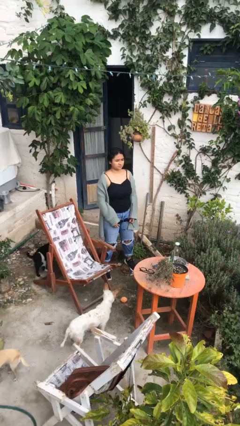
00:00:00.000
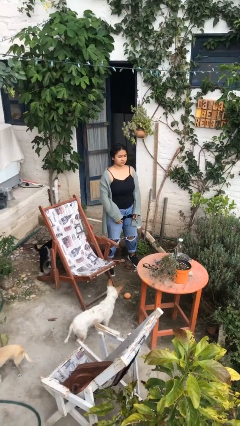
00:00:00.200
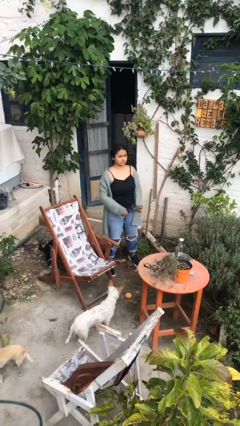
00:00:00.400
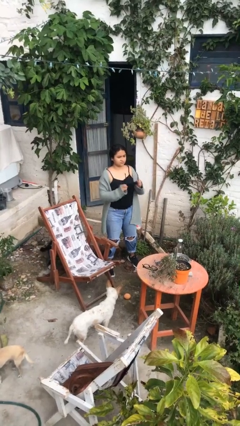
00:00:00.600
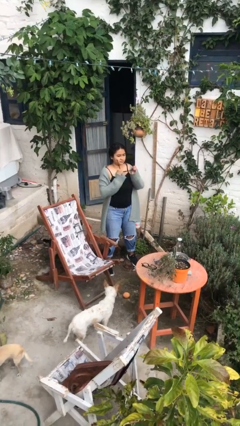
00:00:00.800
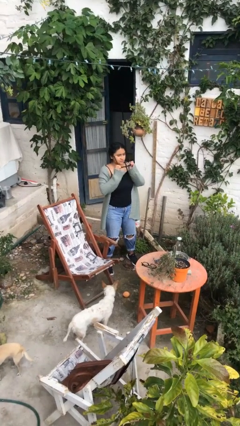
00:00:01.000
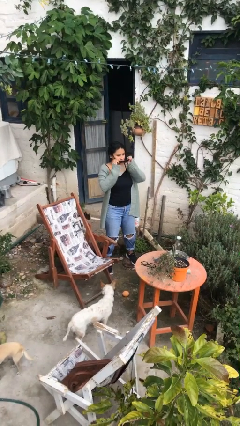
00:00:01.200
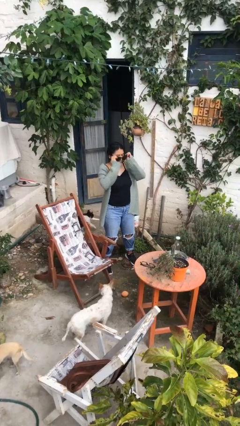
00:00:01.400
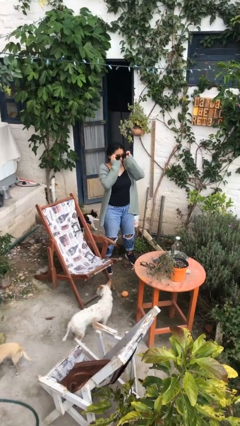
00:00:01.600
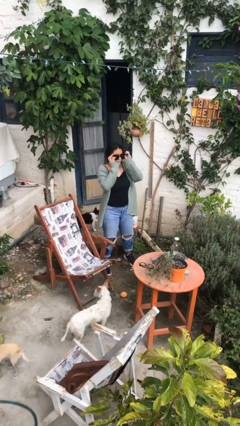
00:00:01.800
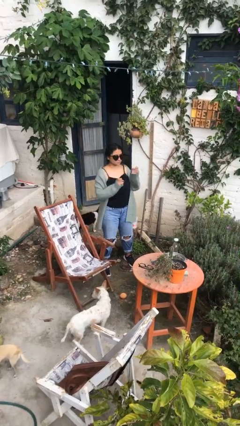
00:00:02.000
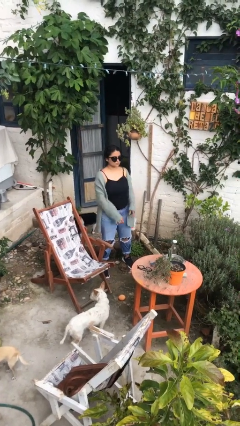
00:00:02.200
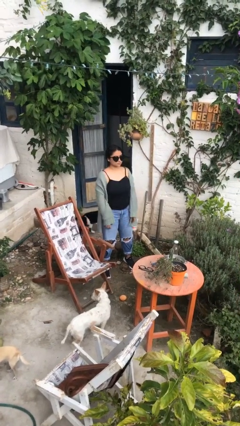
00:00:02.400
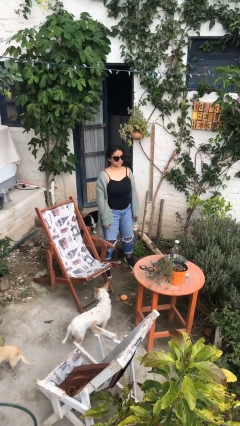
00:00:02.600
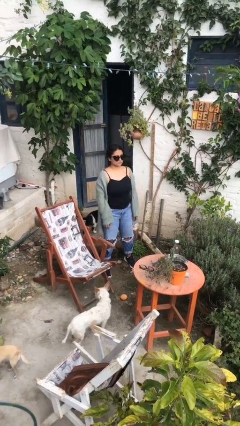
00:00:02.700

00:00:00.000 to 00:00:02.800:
person puts on sunglasses

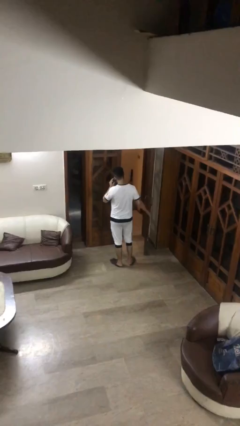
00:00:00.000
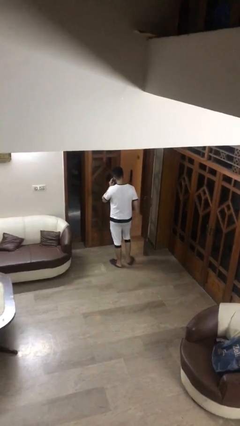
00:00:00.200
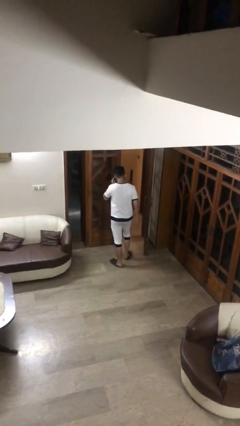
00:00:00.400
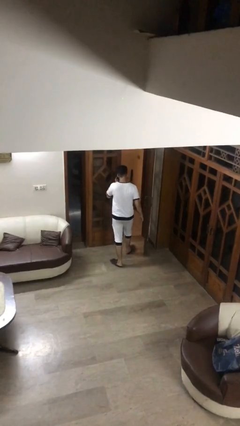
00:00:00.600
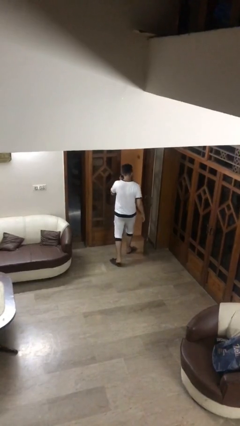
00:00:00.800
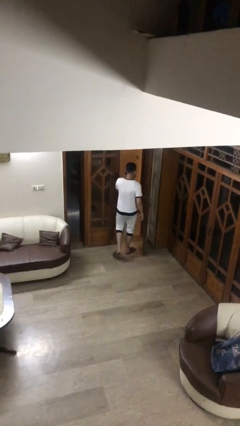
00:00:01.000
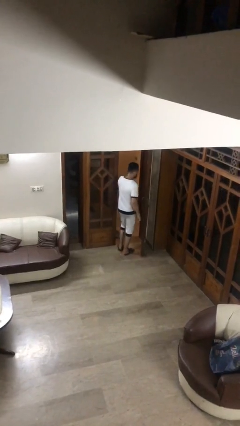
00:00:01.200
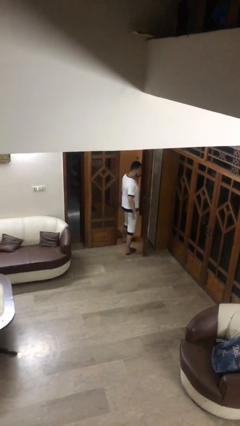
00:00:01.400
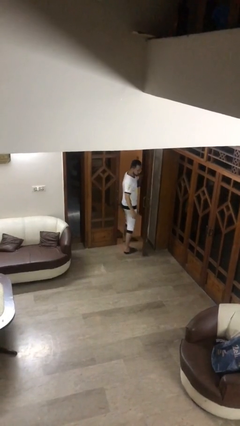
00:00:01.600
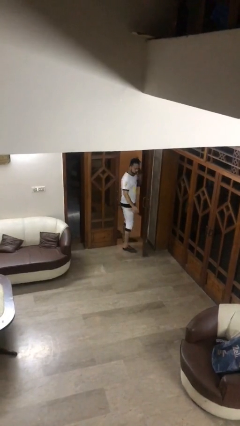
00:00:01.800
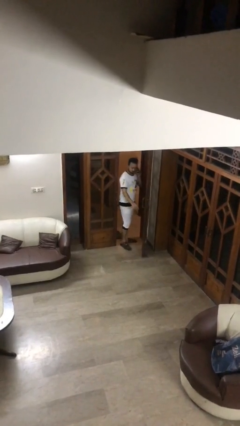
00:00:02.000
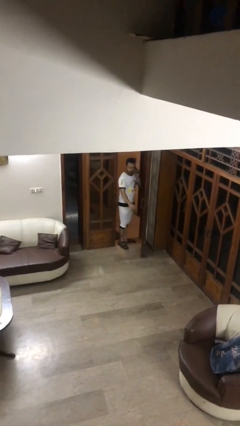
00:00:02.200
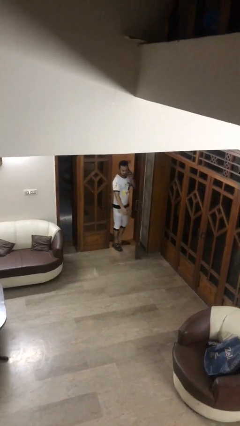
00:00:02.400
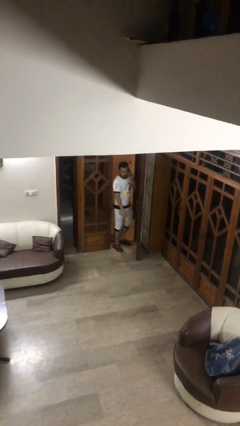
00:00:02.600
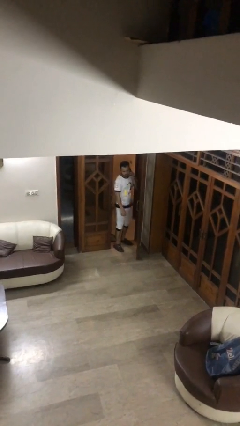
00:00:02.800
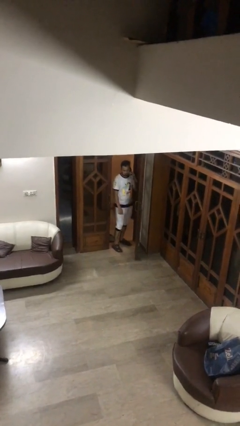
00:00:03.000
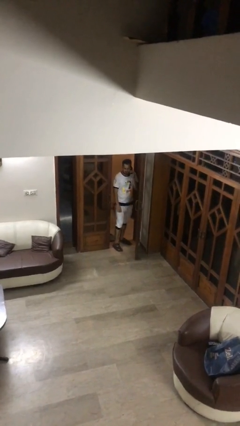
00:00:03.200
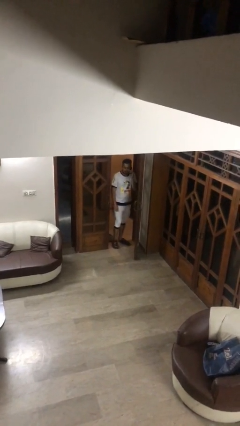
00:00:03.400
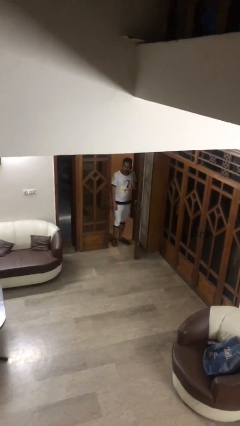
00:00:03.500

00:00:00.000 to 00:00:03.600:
person exits scene through structure

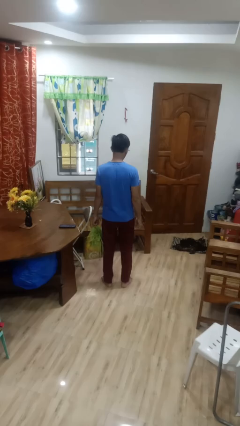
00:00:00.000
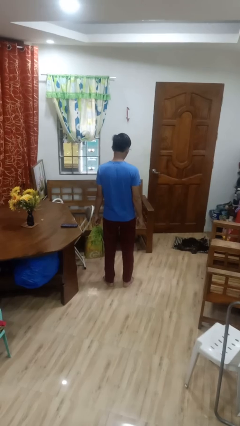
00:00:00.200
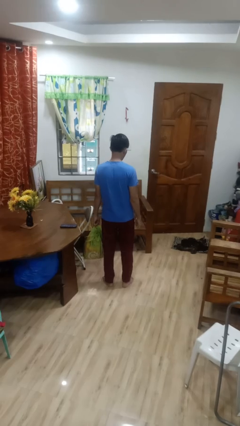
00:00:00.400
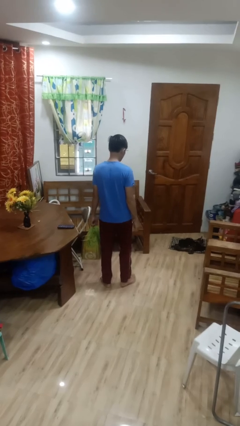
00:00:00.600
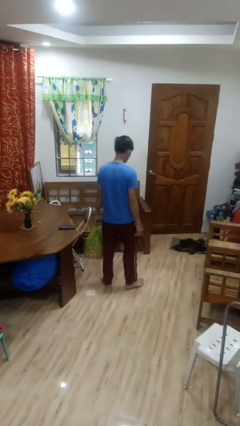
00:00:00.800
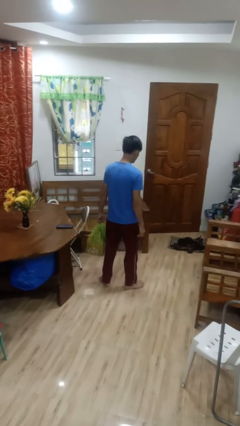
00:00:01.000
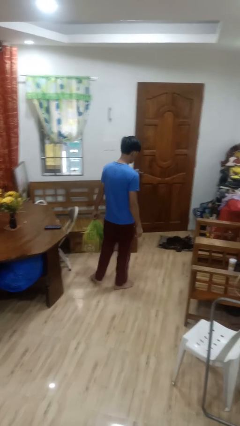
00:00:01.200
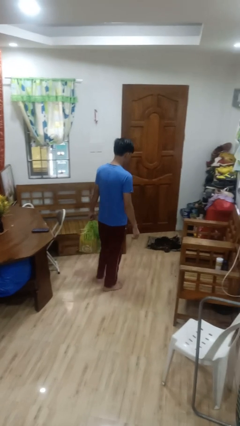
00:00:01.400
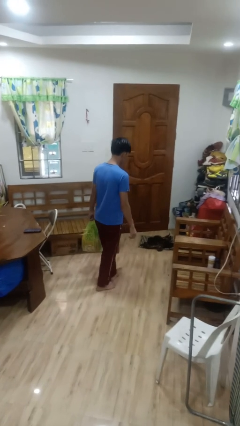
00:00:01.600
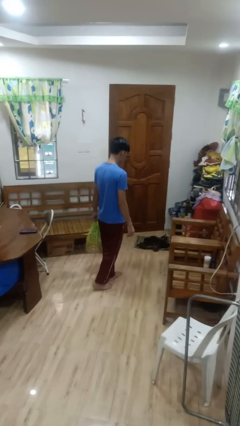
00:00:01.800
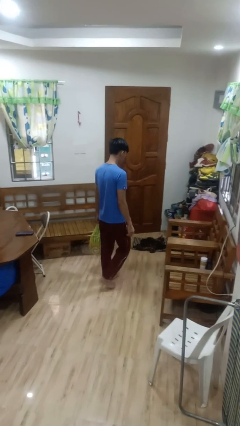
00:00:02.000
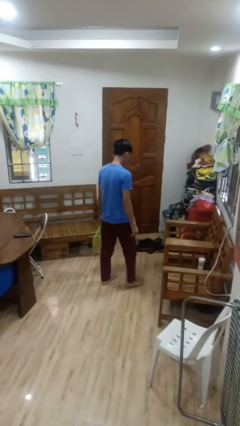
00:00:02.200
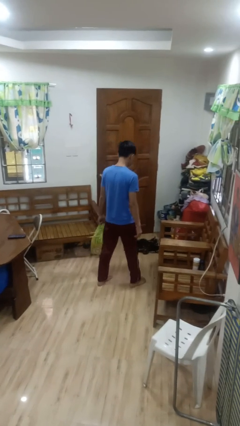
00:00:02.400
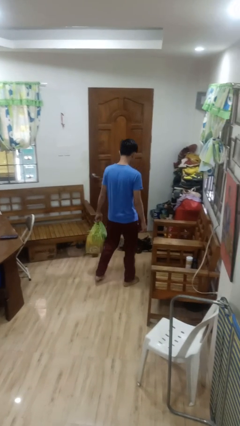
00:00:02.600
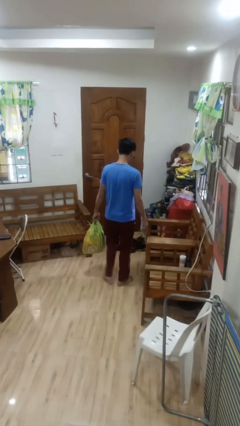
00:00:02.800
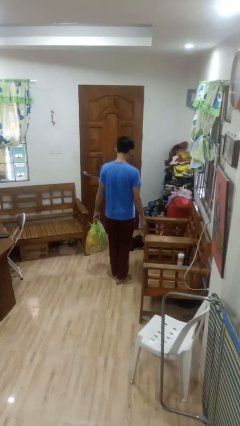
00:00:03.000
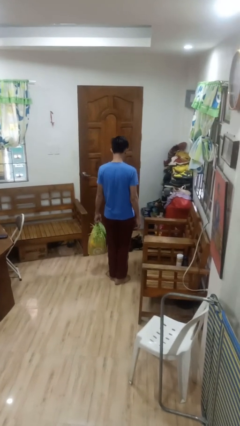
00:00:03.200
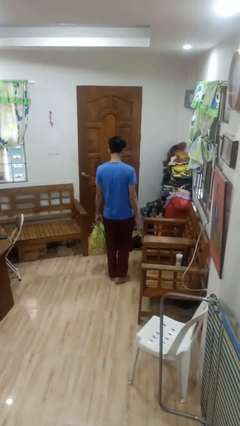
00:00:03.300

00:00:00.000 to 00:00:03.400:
person carries groceries

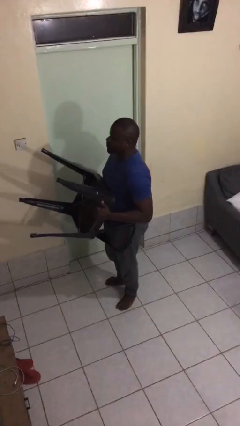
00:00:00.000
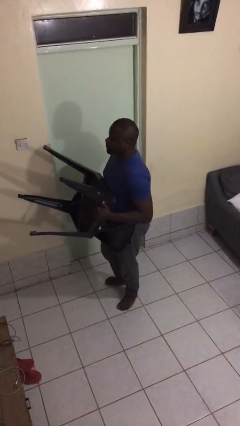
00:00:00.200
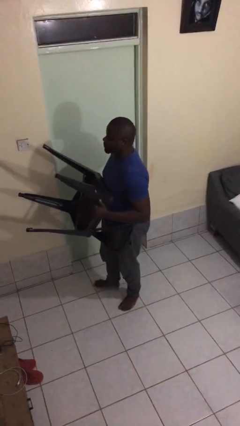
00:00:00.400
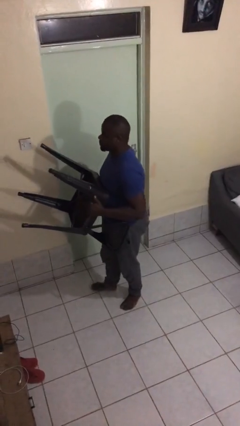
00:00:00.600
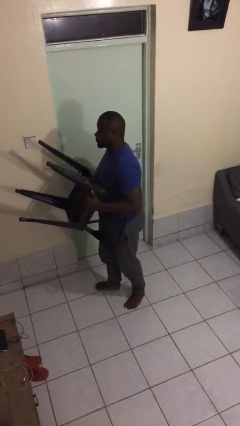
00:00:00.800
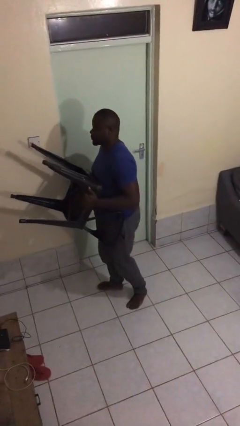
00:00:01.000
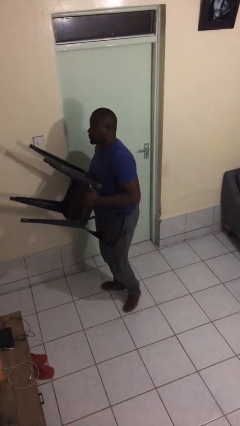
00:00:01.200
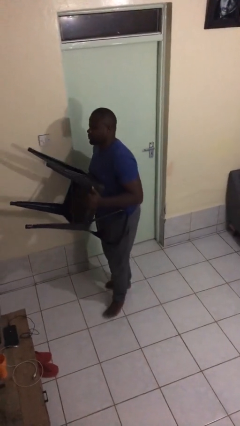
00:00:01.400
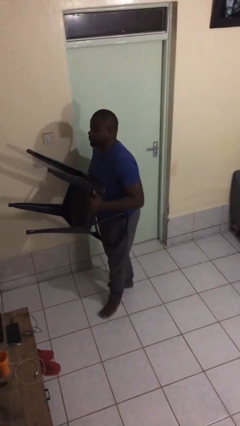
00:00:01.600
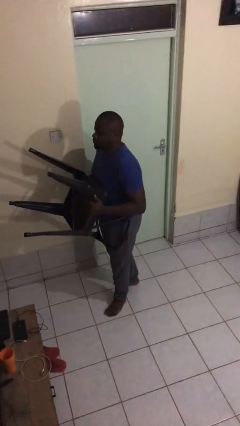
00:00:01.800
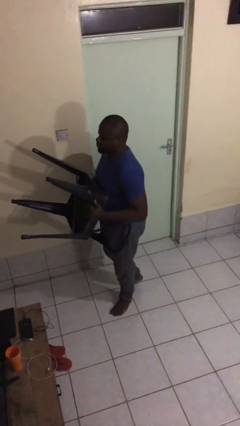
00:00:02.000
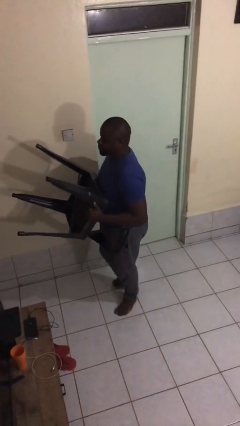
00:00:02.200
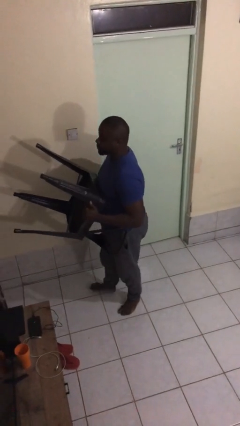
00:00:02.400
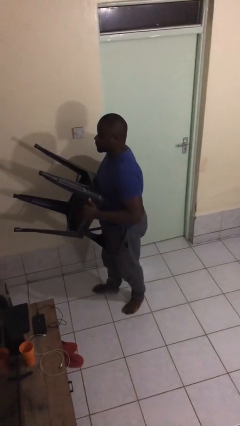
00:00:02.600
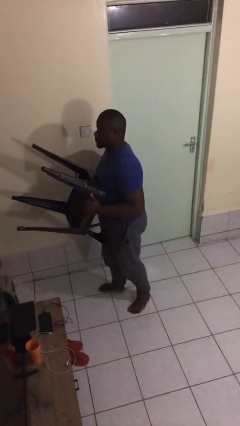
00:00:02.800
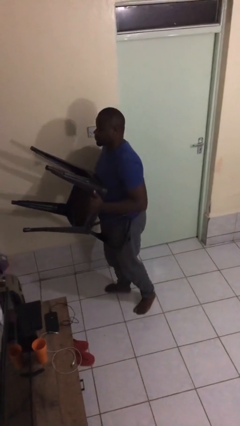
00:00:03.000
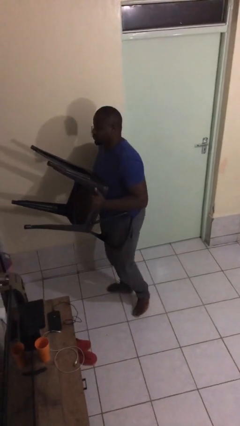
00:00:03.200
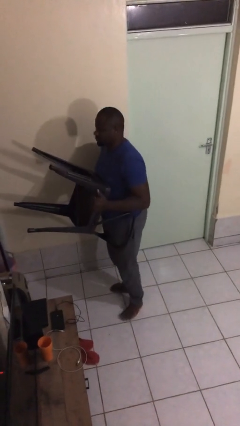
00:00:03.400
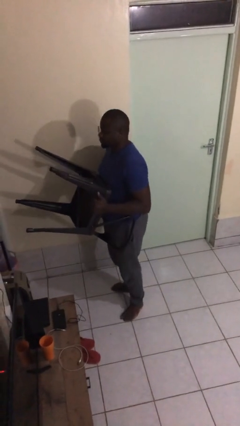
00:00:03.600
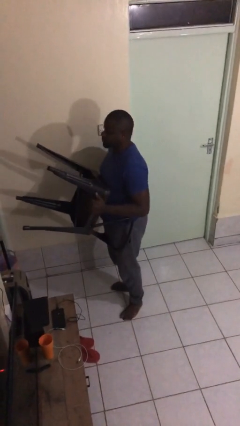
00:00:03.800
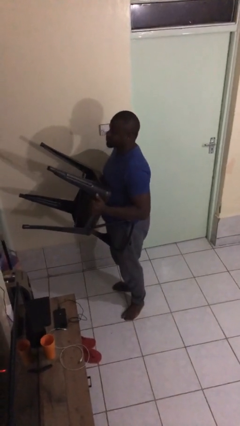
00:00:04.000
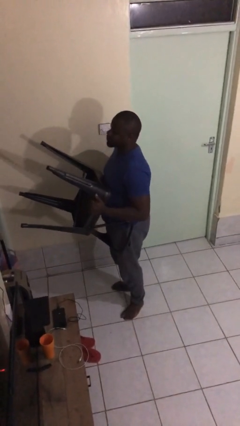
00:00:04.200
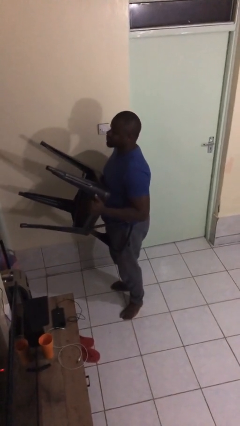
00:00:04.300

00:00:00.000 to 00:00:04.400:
person carries furniture

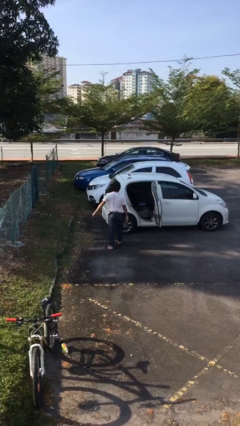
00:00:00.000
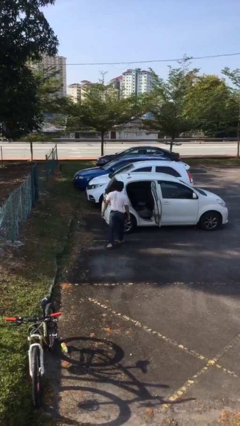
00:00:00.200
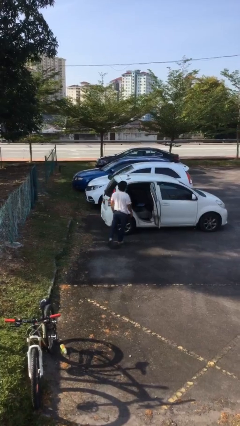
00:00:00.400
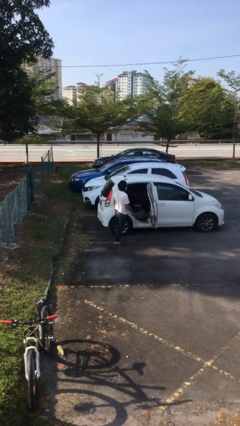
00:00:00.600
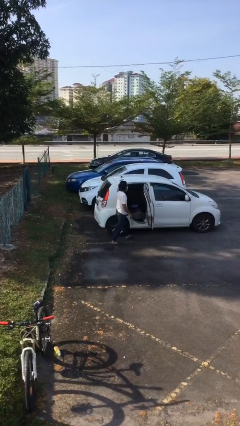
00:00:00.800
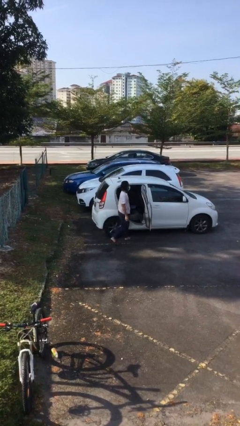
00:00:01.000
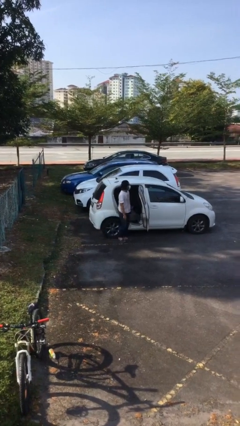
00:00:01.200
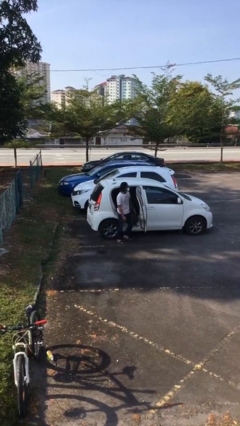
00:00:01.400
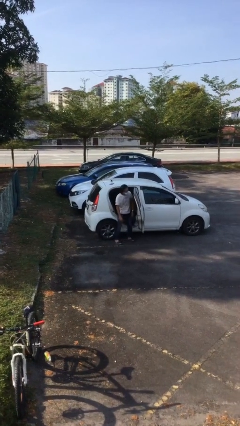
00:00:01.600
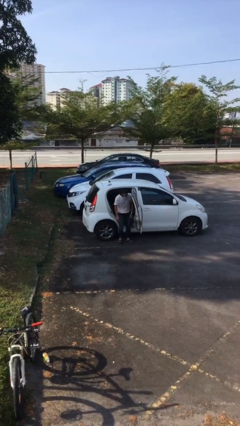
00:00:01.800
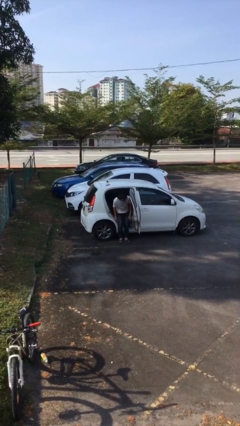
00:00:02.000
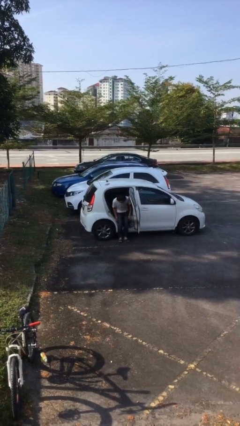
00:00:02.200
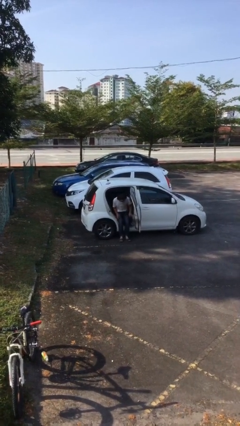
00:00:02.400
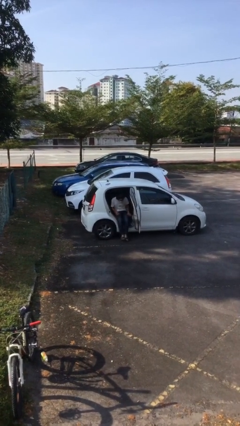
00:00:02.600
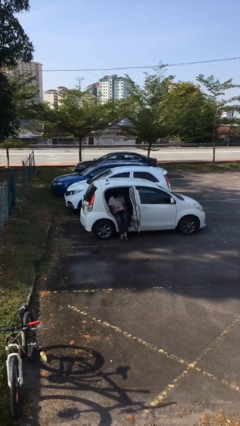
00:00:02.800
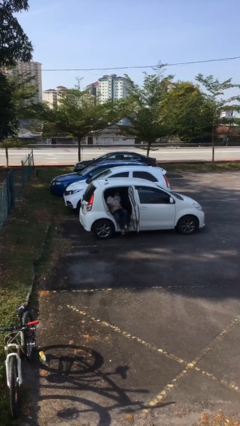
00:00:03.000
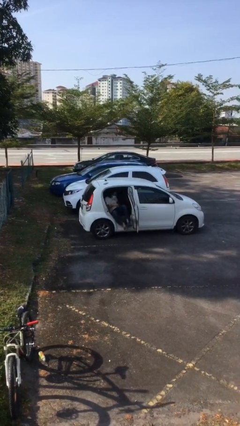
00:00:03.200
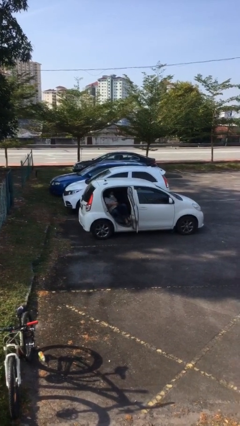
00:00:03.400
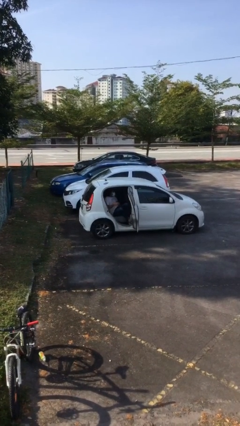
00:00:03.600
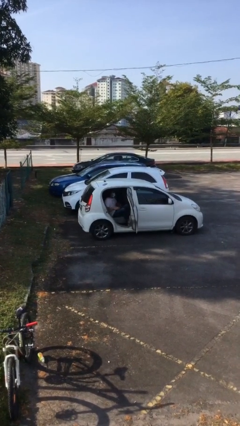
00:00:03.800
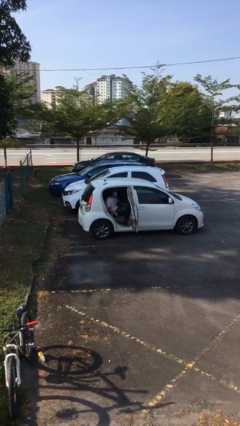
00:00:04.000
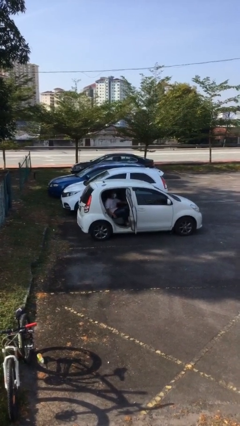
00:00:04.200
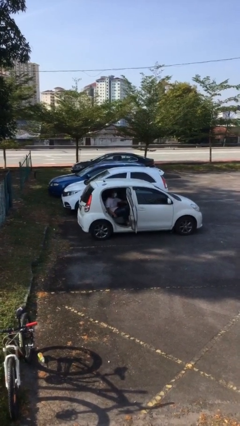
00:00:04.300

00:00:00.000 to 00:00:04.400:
person enters car
